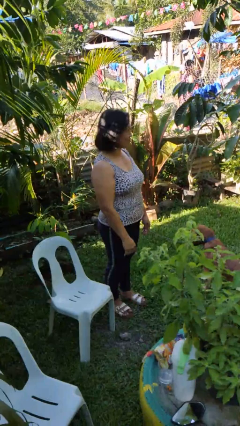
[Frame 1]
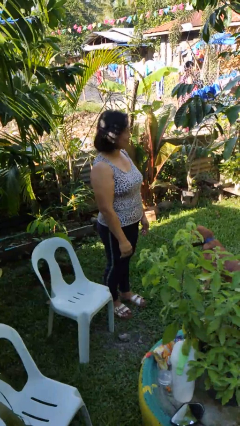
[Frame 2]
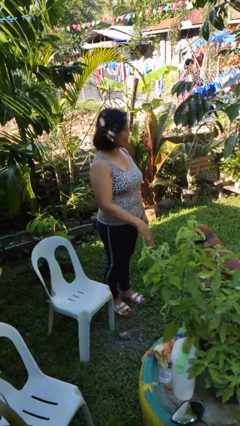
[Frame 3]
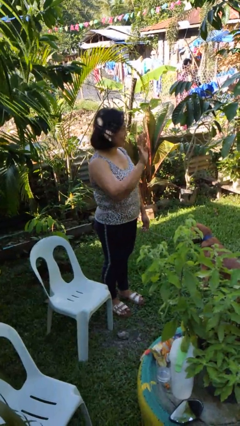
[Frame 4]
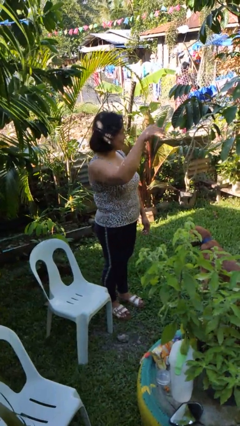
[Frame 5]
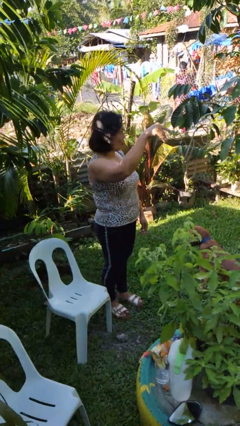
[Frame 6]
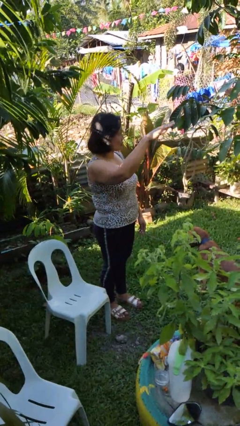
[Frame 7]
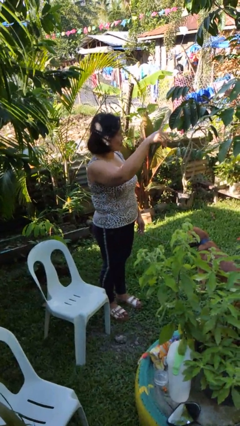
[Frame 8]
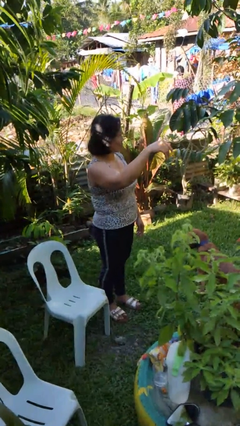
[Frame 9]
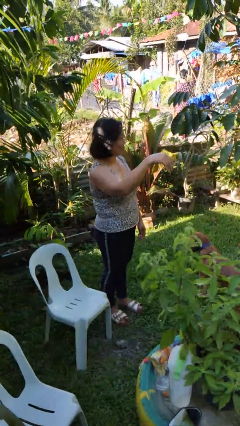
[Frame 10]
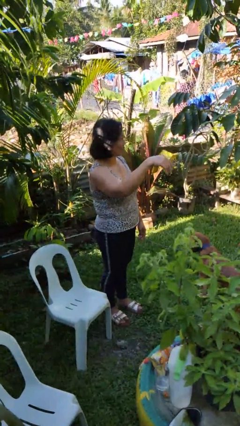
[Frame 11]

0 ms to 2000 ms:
person gestures come here

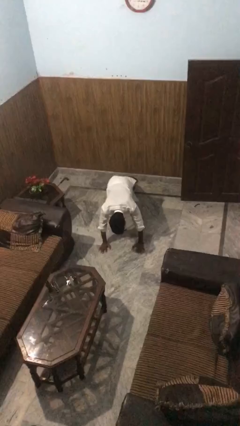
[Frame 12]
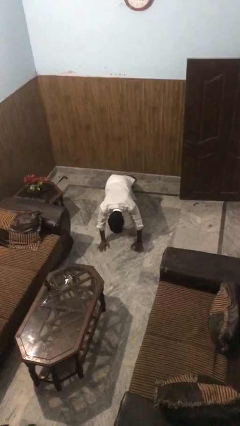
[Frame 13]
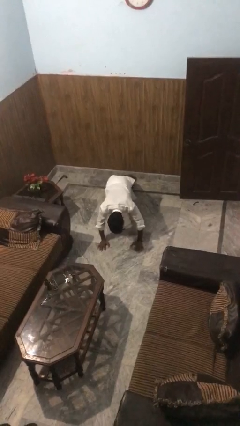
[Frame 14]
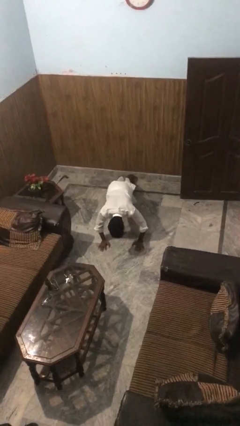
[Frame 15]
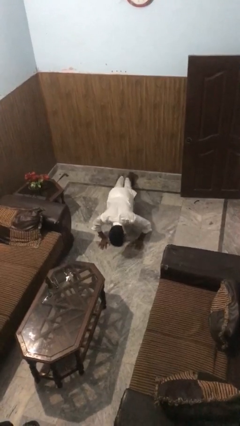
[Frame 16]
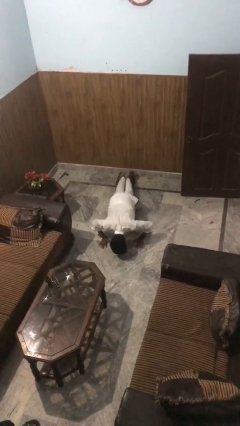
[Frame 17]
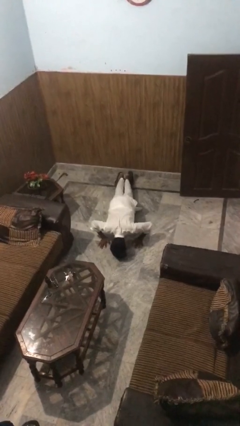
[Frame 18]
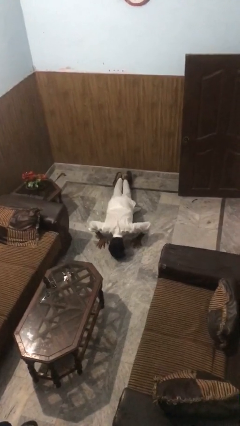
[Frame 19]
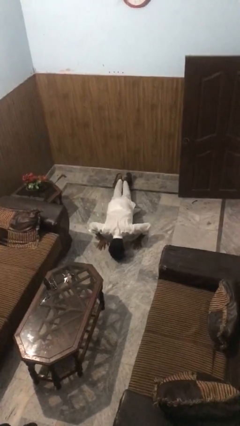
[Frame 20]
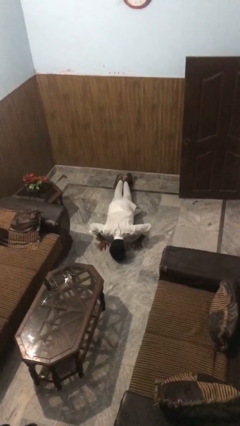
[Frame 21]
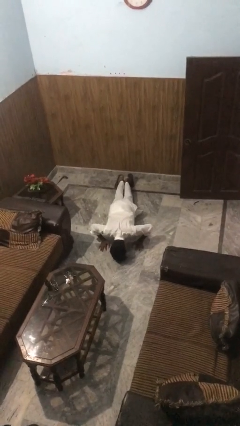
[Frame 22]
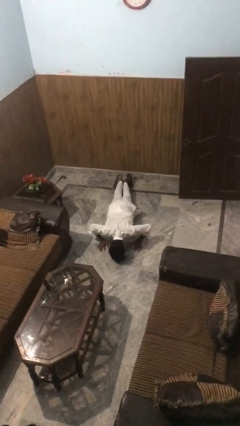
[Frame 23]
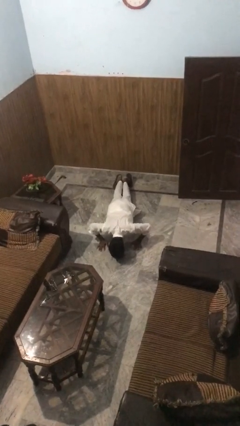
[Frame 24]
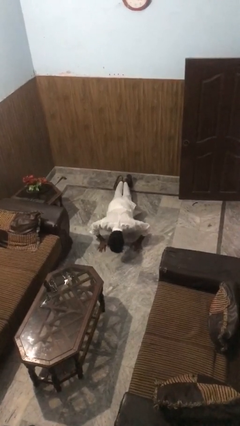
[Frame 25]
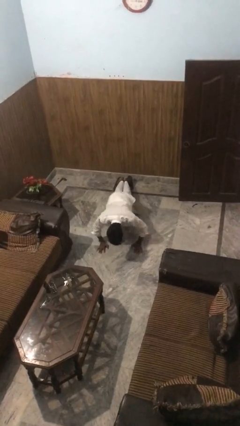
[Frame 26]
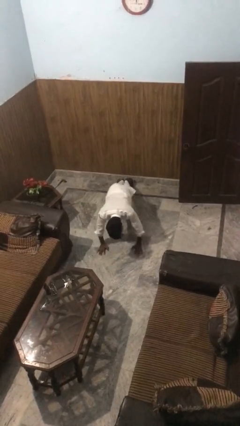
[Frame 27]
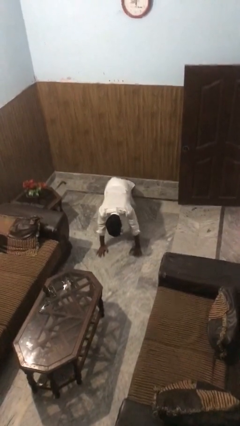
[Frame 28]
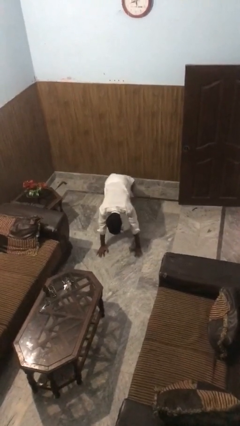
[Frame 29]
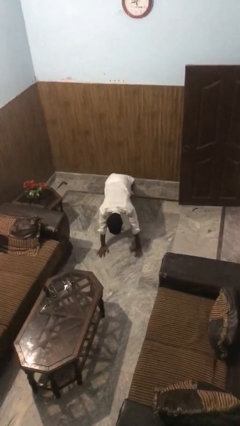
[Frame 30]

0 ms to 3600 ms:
person exercises with pushup

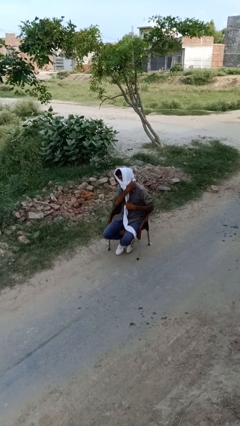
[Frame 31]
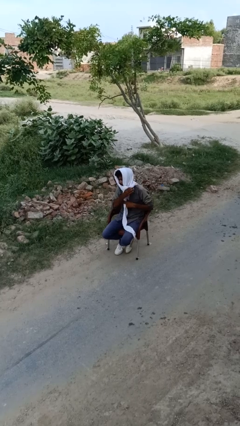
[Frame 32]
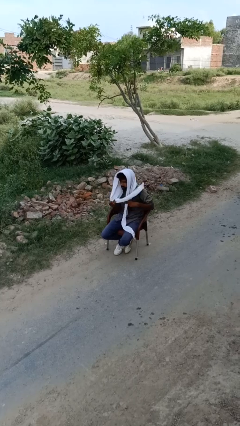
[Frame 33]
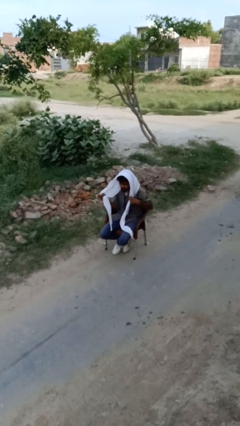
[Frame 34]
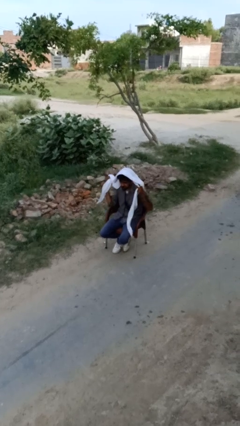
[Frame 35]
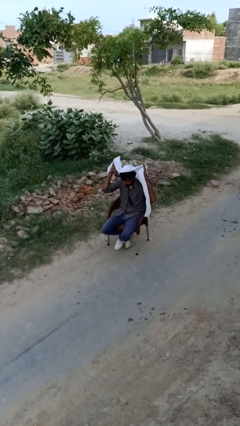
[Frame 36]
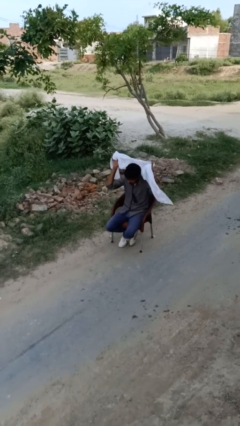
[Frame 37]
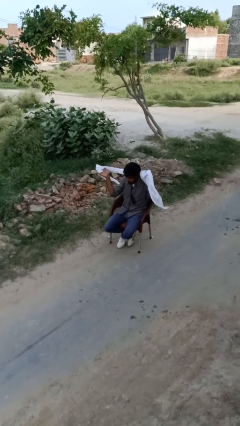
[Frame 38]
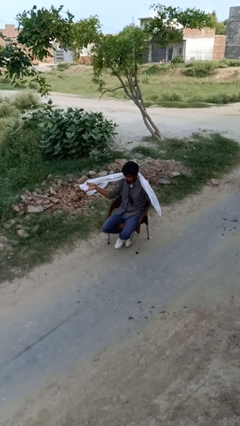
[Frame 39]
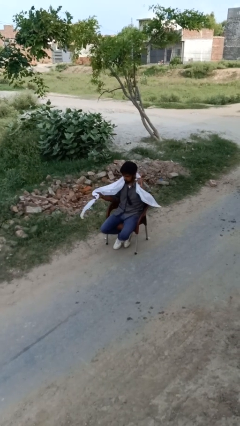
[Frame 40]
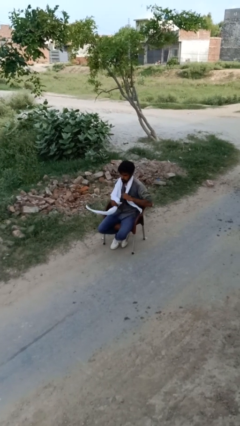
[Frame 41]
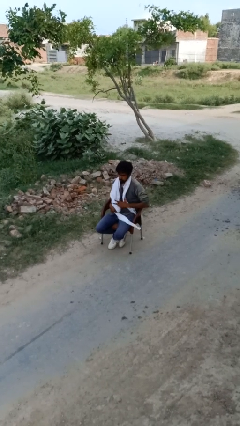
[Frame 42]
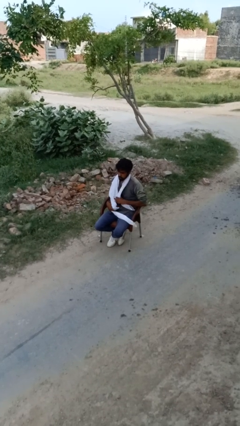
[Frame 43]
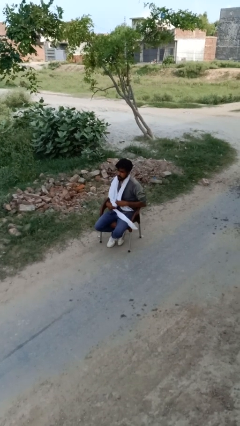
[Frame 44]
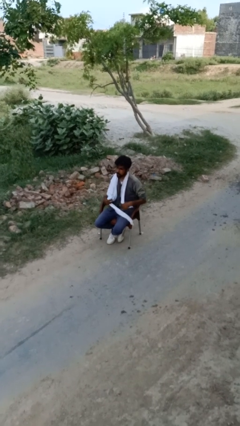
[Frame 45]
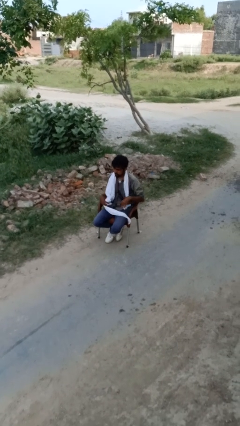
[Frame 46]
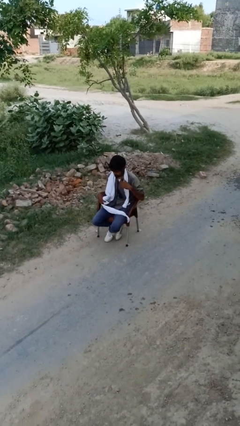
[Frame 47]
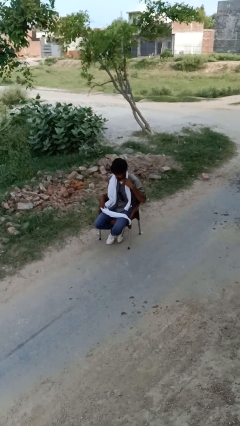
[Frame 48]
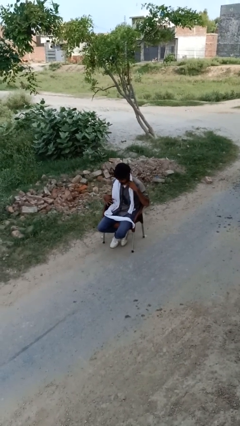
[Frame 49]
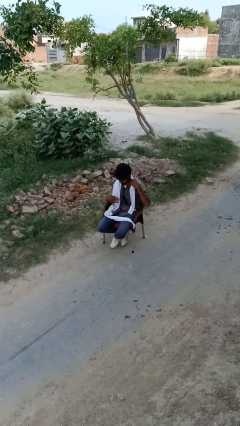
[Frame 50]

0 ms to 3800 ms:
person takes off scarf

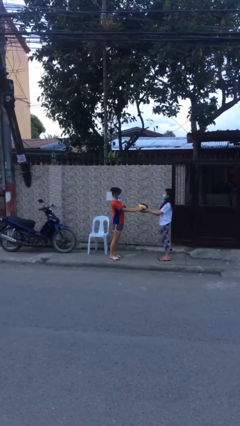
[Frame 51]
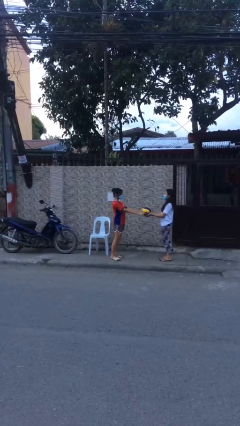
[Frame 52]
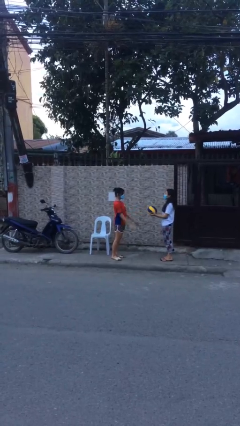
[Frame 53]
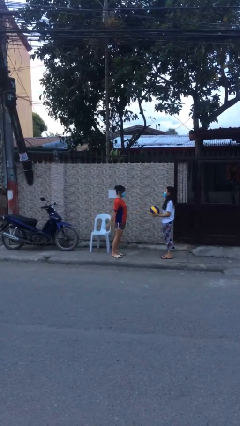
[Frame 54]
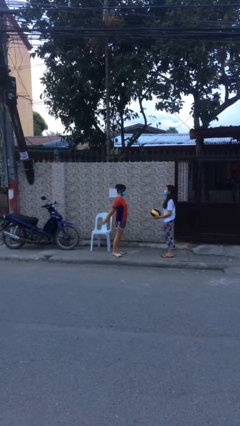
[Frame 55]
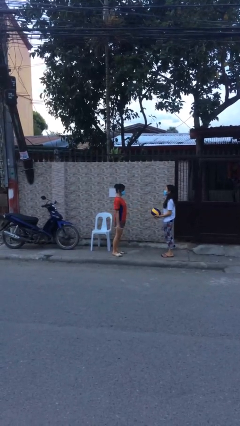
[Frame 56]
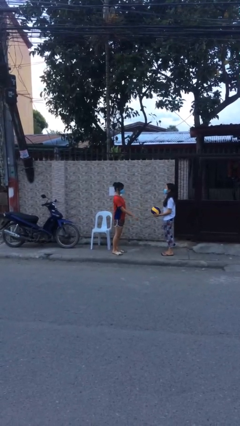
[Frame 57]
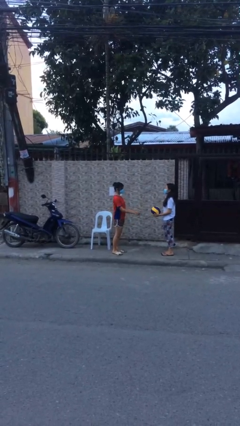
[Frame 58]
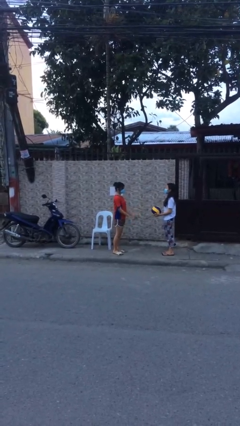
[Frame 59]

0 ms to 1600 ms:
person transfers object to person

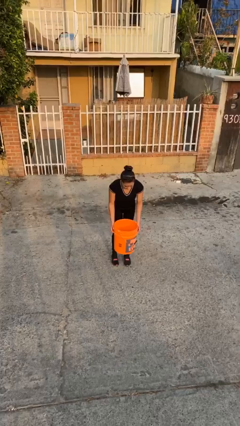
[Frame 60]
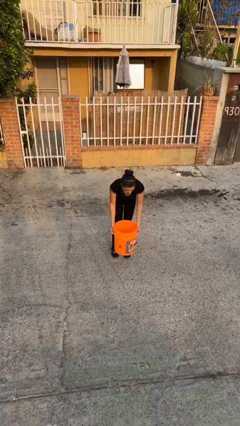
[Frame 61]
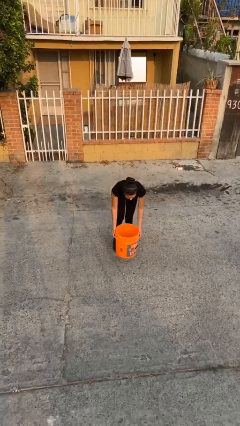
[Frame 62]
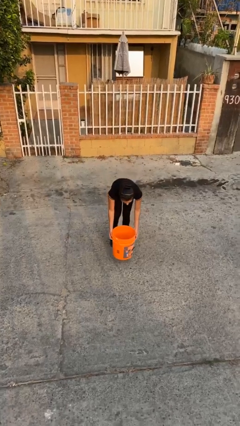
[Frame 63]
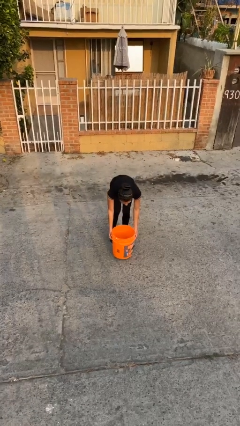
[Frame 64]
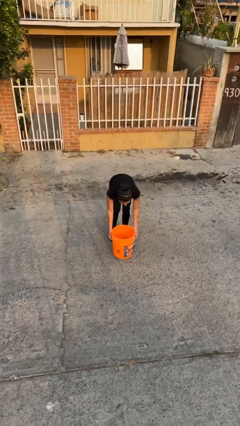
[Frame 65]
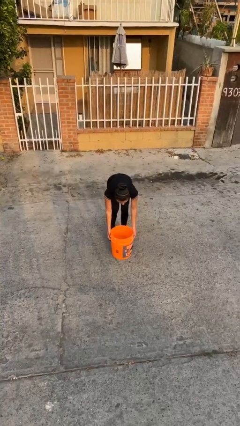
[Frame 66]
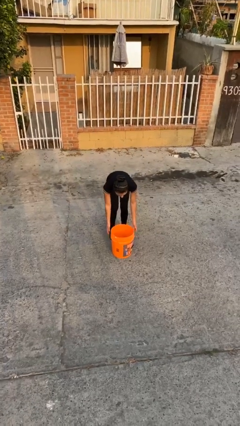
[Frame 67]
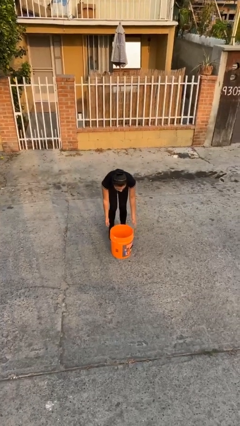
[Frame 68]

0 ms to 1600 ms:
person puts down object on floor

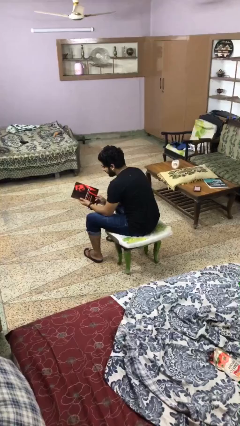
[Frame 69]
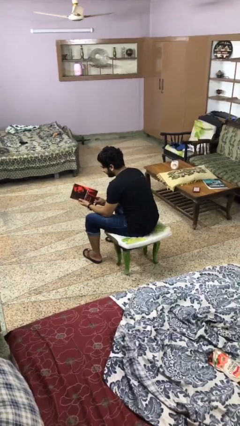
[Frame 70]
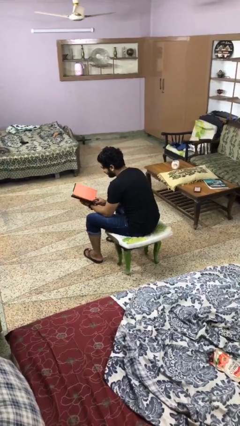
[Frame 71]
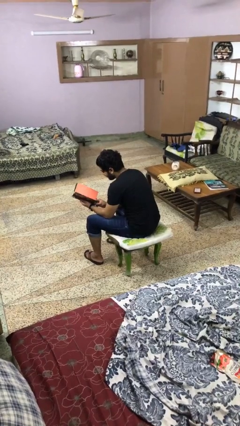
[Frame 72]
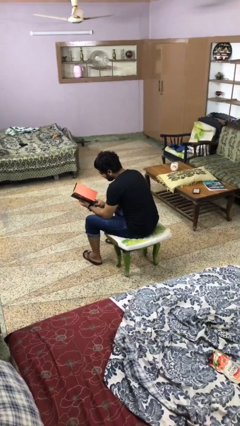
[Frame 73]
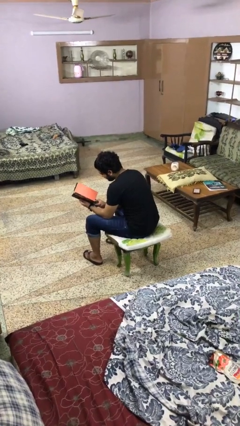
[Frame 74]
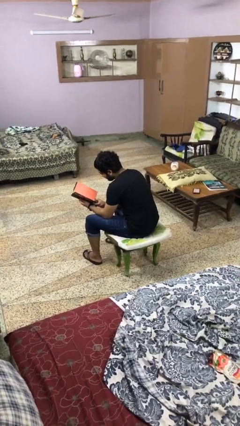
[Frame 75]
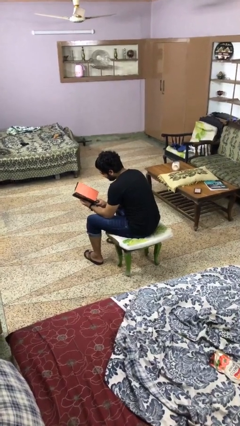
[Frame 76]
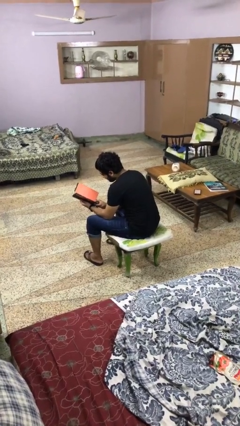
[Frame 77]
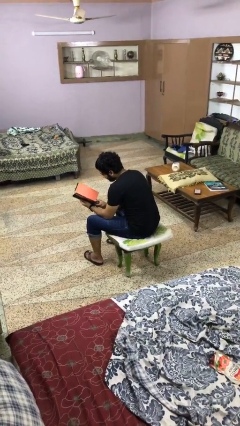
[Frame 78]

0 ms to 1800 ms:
person reads magazine

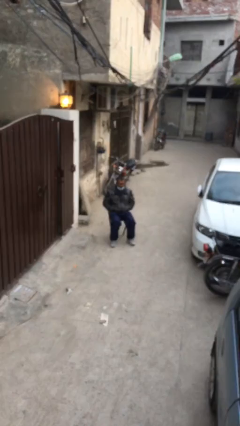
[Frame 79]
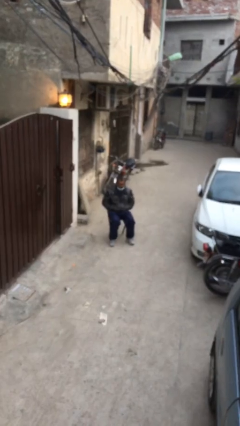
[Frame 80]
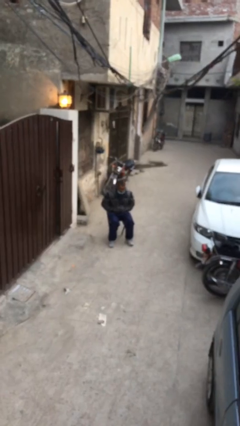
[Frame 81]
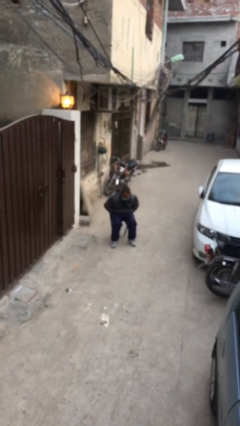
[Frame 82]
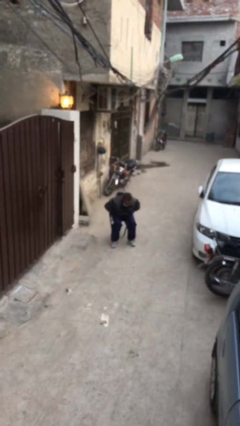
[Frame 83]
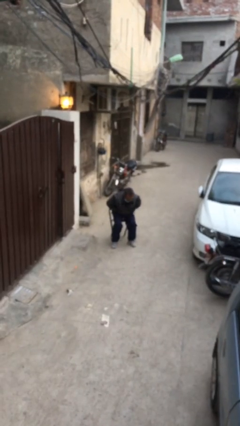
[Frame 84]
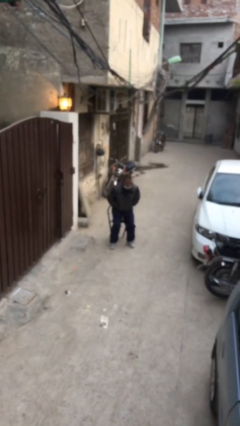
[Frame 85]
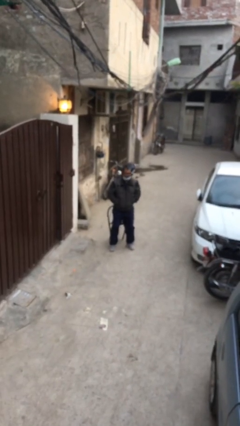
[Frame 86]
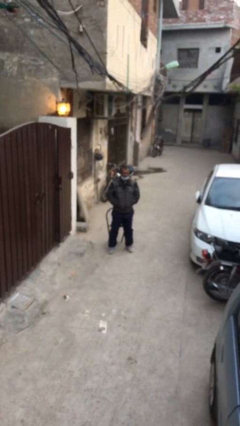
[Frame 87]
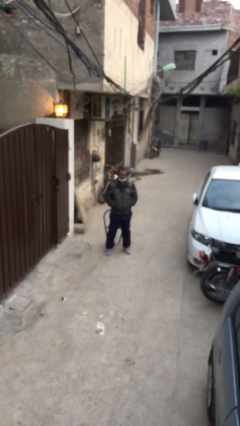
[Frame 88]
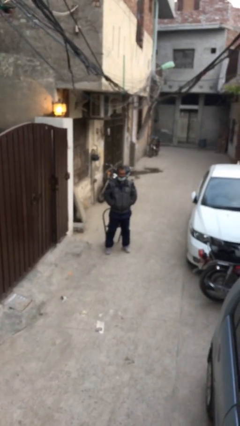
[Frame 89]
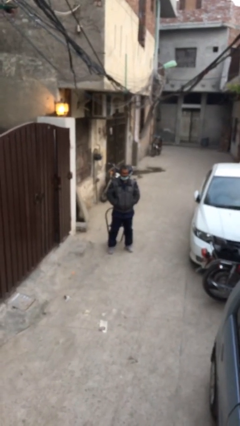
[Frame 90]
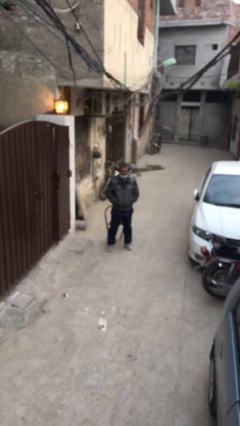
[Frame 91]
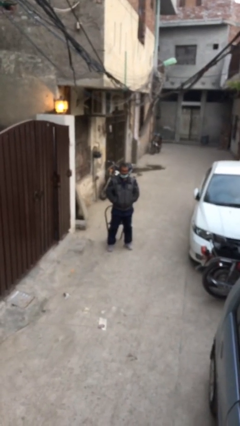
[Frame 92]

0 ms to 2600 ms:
person stands up
